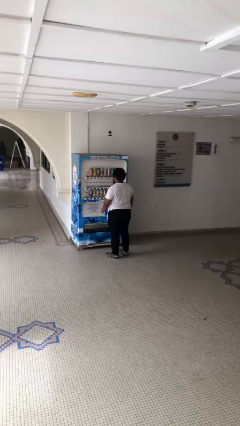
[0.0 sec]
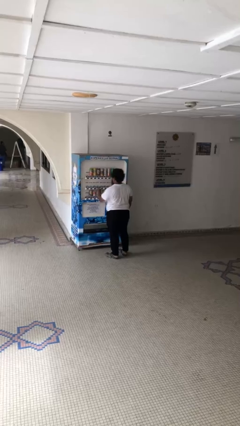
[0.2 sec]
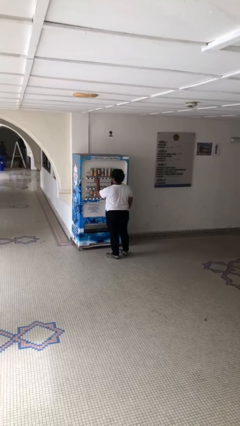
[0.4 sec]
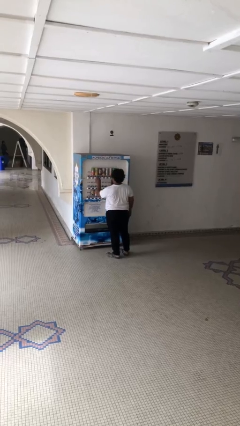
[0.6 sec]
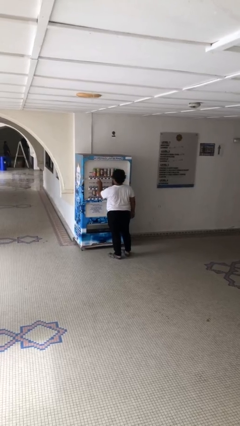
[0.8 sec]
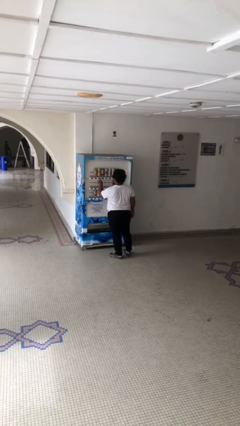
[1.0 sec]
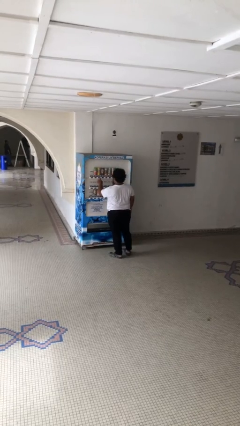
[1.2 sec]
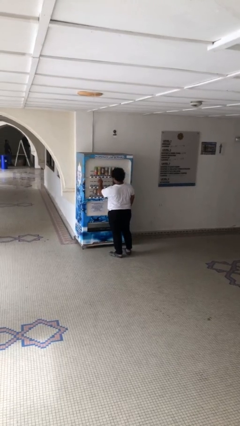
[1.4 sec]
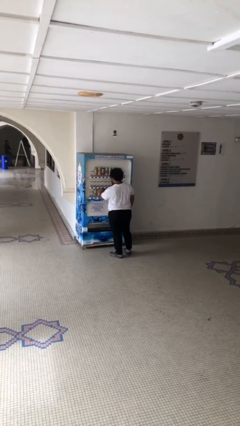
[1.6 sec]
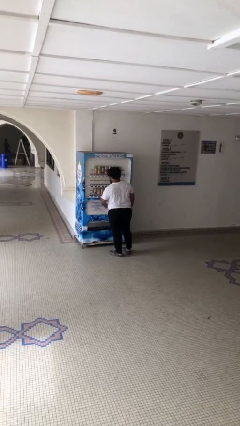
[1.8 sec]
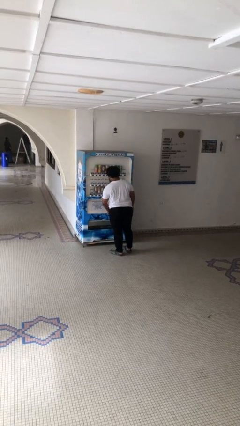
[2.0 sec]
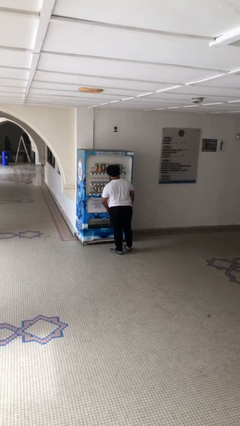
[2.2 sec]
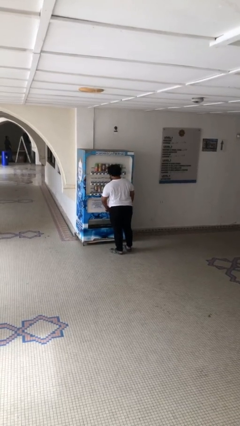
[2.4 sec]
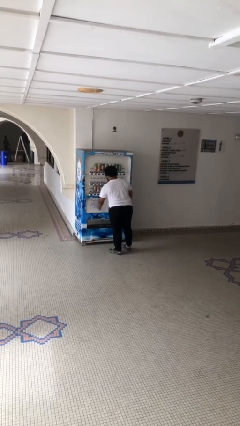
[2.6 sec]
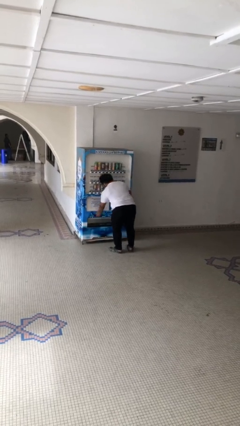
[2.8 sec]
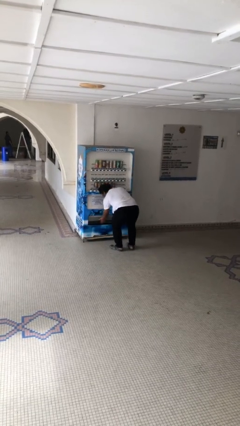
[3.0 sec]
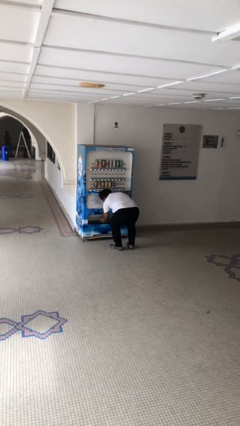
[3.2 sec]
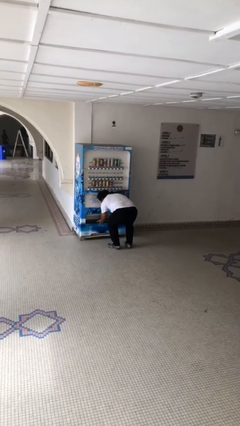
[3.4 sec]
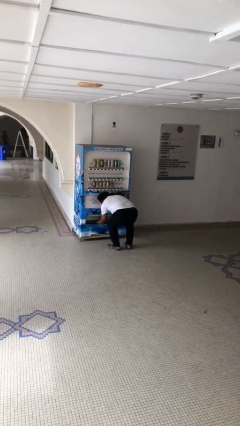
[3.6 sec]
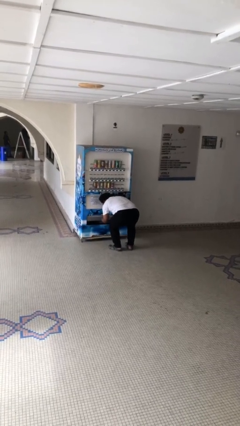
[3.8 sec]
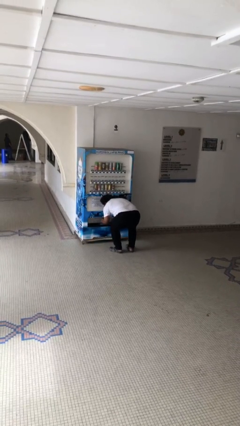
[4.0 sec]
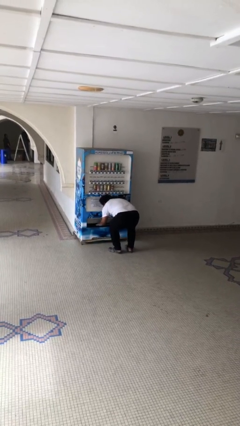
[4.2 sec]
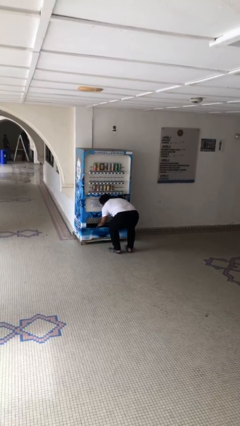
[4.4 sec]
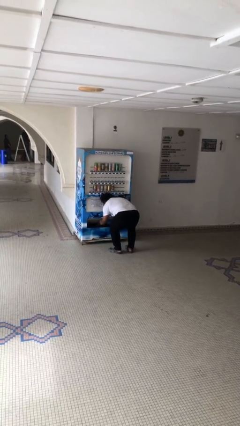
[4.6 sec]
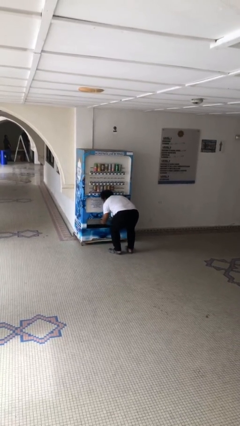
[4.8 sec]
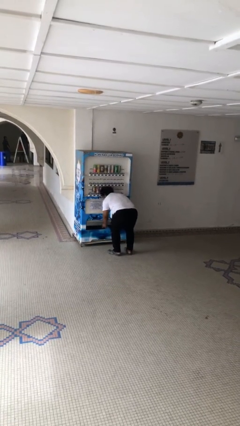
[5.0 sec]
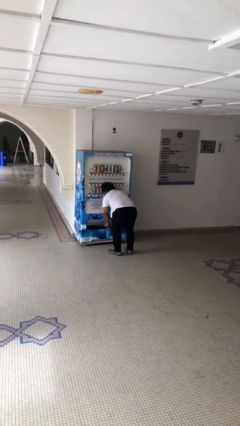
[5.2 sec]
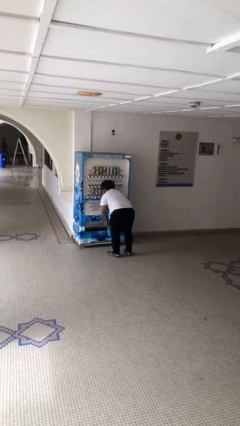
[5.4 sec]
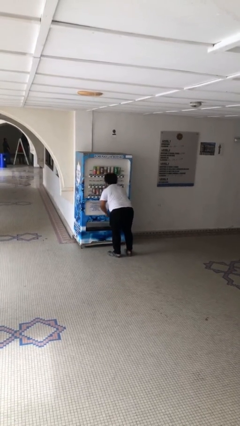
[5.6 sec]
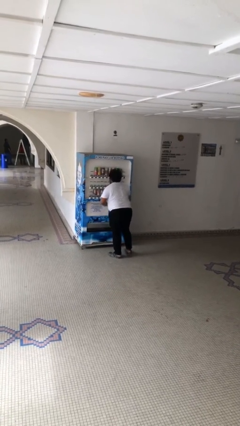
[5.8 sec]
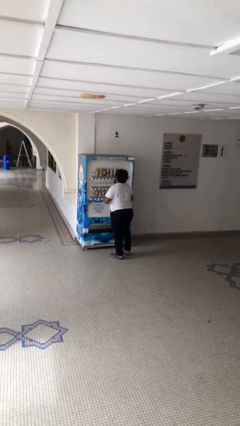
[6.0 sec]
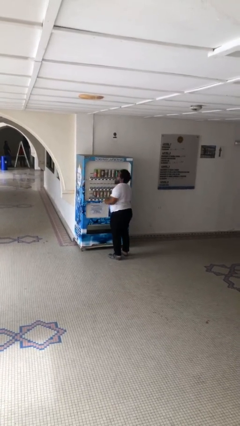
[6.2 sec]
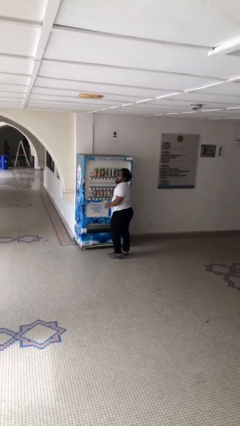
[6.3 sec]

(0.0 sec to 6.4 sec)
person purchases from machine

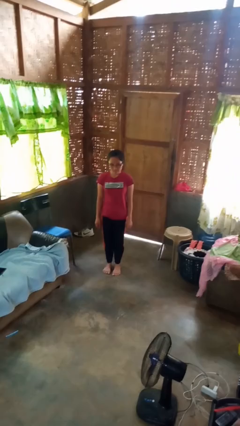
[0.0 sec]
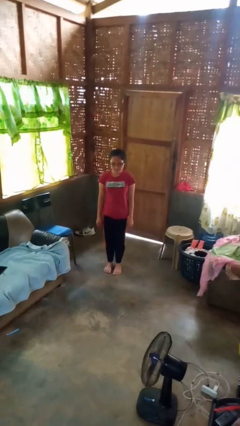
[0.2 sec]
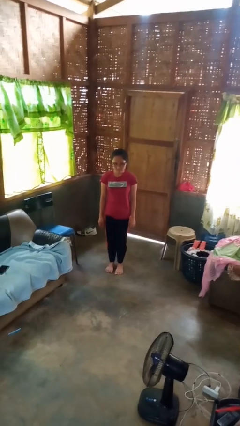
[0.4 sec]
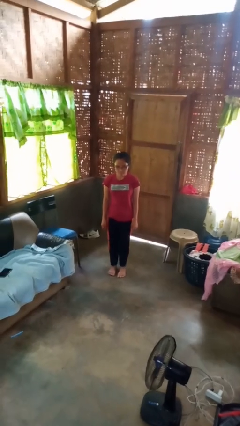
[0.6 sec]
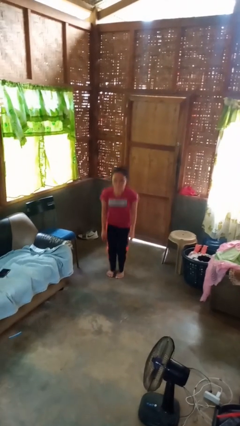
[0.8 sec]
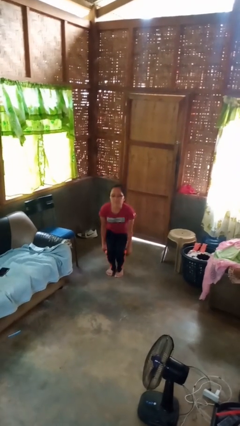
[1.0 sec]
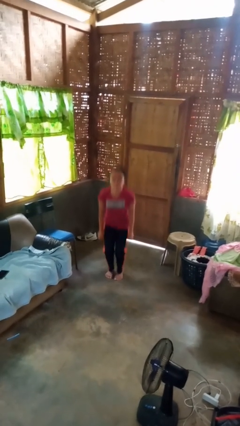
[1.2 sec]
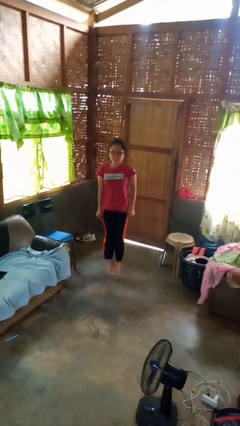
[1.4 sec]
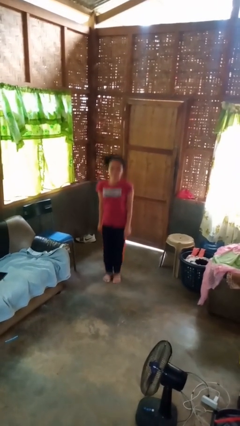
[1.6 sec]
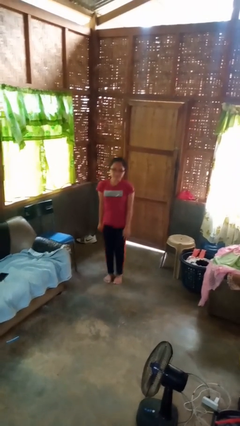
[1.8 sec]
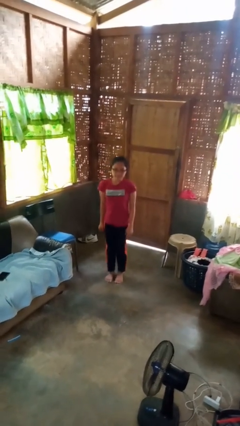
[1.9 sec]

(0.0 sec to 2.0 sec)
person jumps

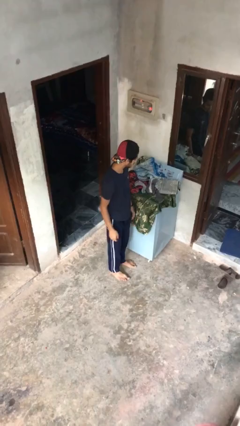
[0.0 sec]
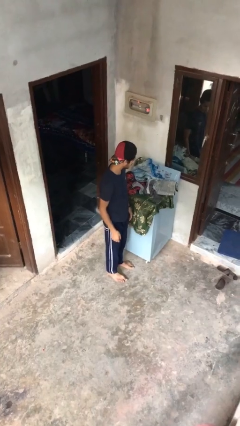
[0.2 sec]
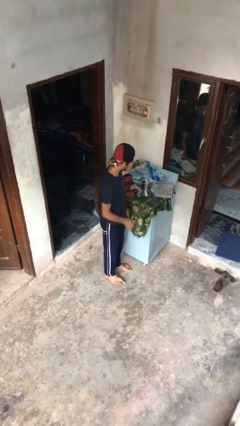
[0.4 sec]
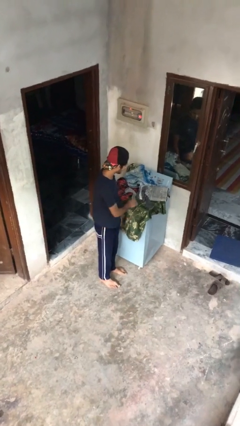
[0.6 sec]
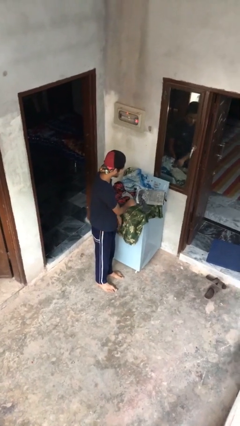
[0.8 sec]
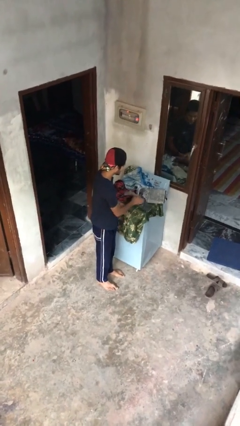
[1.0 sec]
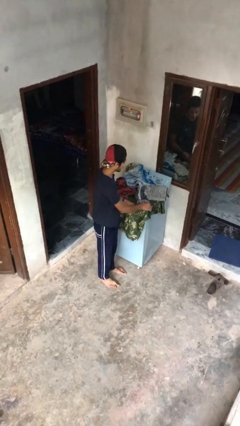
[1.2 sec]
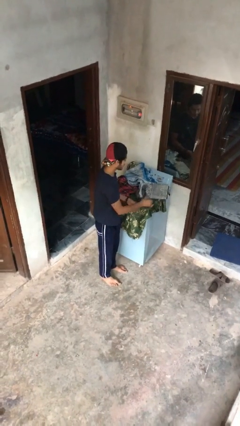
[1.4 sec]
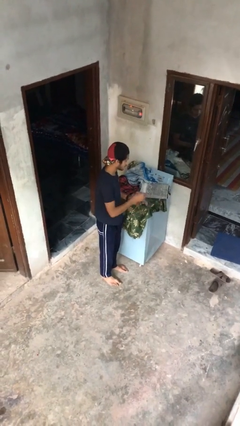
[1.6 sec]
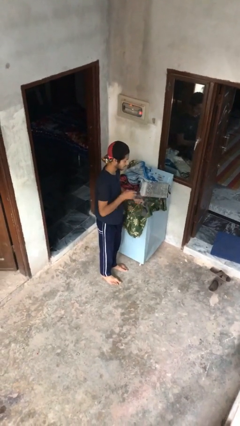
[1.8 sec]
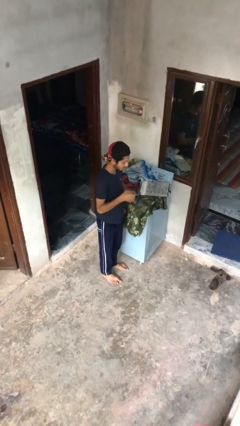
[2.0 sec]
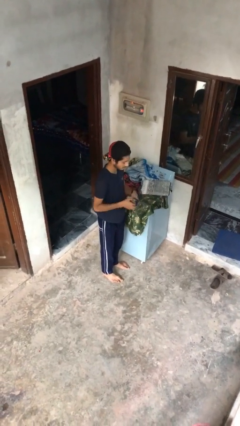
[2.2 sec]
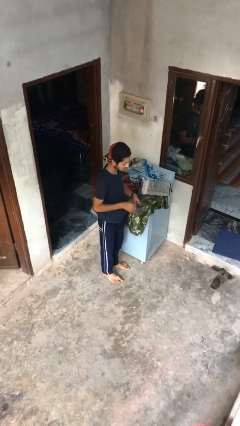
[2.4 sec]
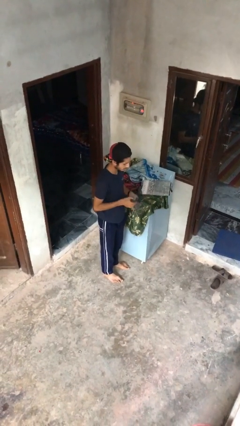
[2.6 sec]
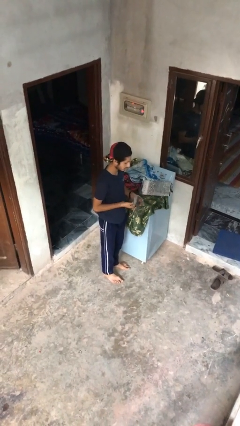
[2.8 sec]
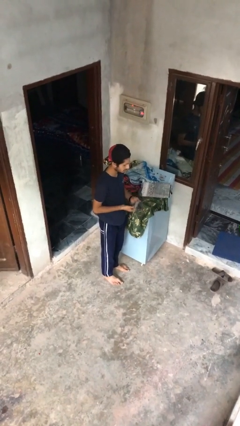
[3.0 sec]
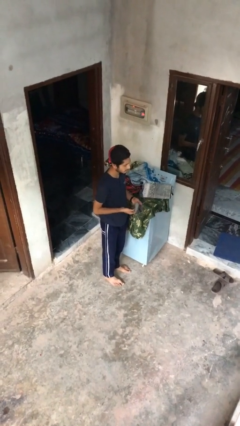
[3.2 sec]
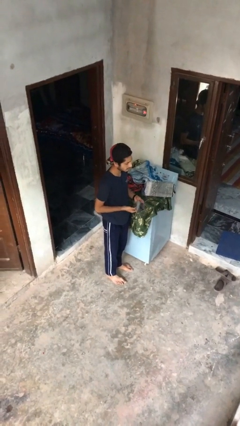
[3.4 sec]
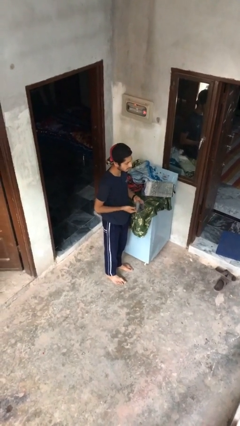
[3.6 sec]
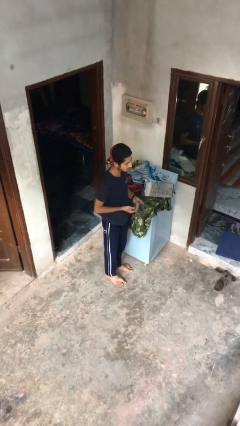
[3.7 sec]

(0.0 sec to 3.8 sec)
person folds socks

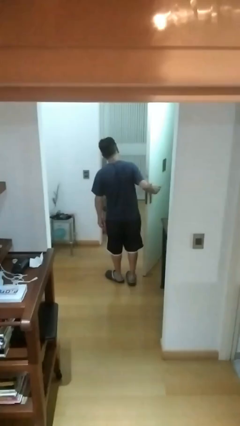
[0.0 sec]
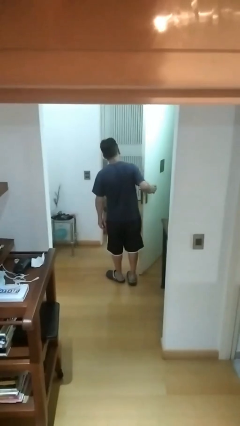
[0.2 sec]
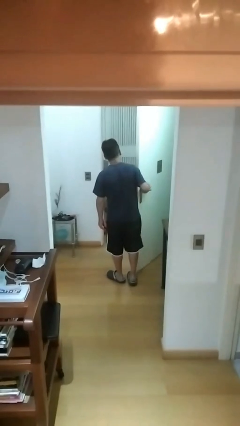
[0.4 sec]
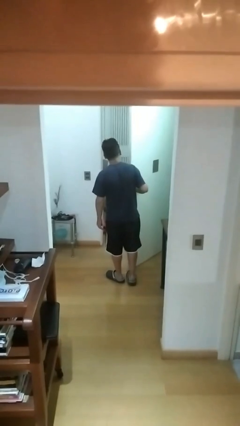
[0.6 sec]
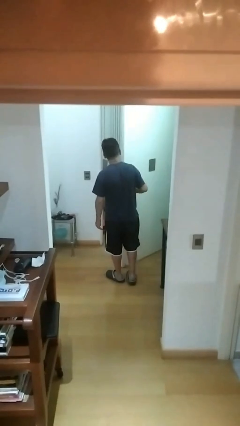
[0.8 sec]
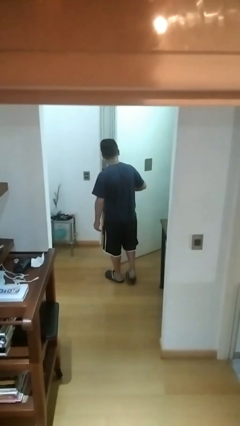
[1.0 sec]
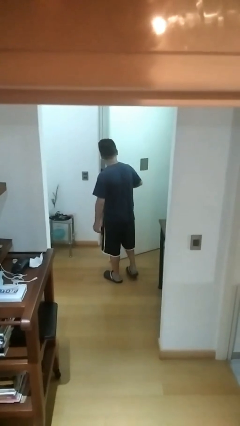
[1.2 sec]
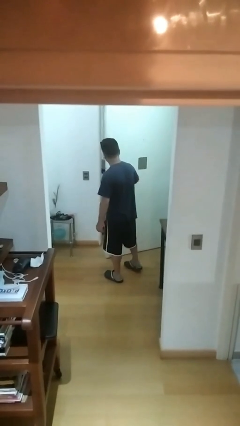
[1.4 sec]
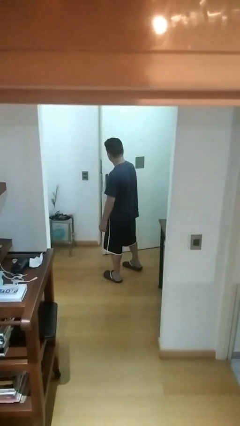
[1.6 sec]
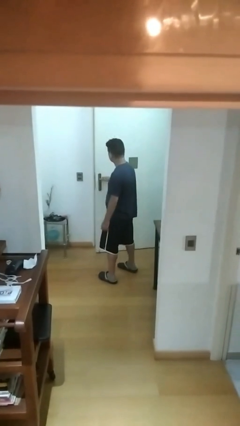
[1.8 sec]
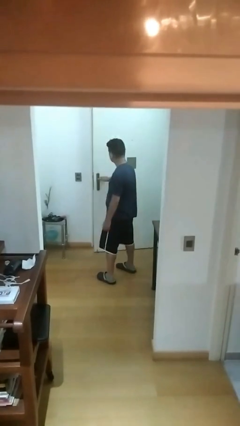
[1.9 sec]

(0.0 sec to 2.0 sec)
person closes facility door

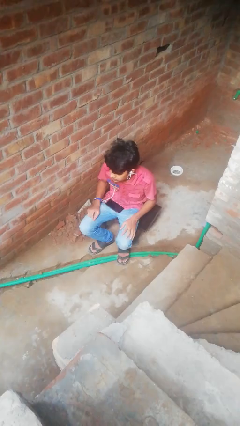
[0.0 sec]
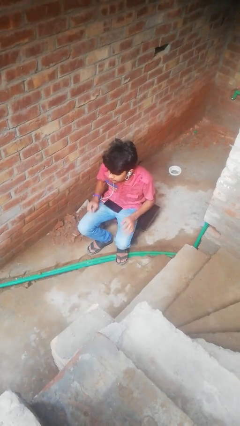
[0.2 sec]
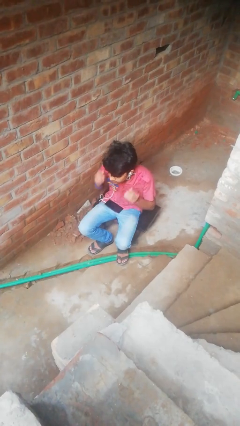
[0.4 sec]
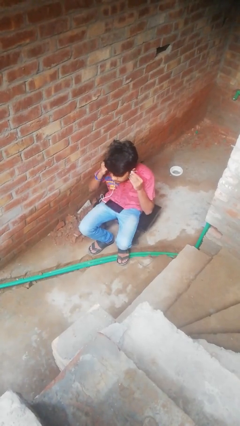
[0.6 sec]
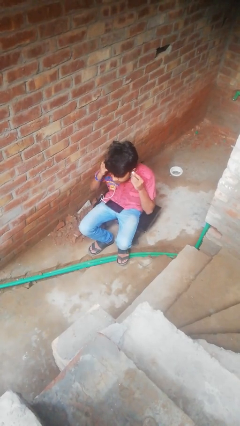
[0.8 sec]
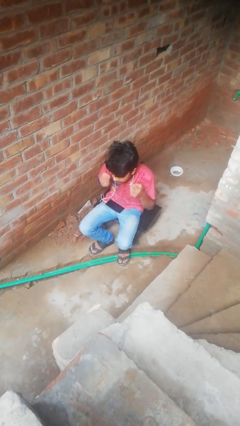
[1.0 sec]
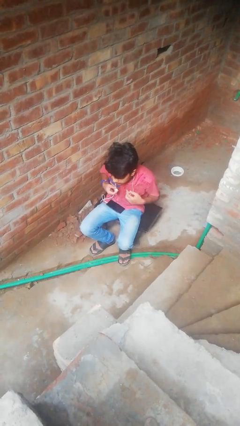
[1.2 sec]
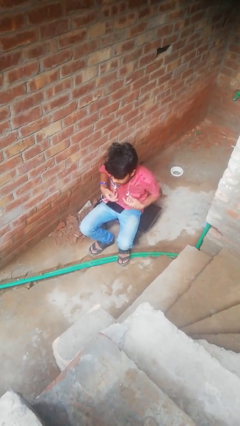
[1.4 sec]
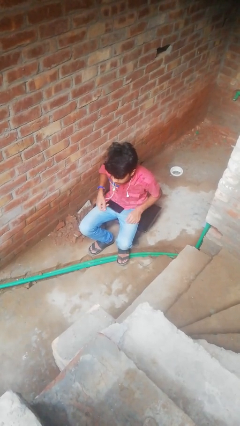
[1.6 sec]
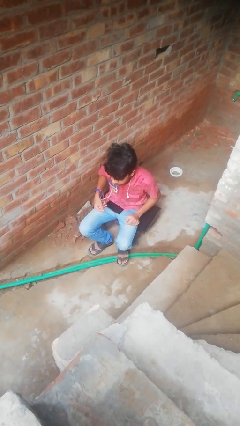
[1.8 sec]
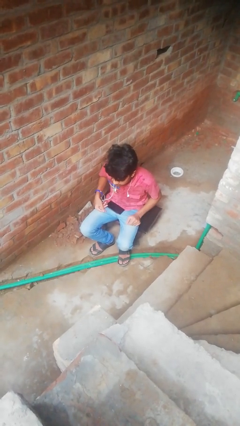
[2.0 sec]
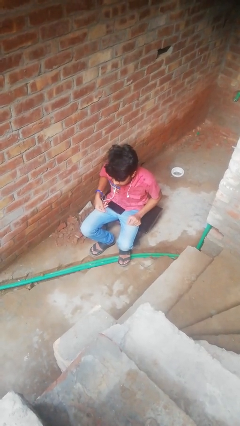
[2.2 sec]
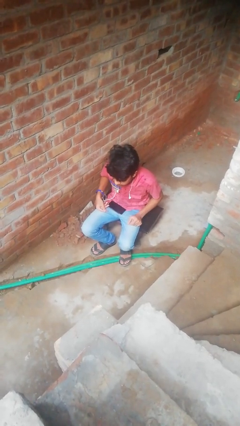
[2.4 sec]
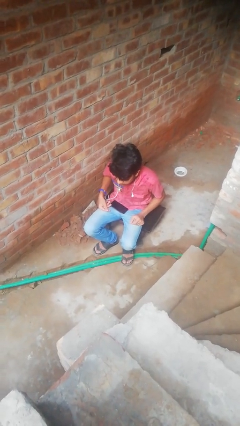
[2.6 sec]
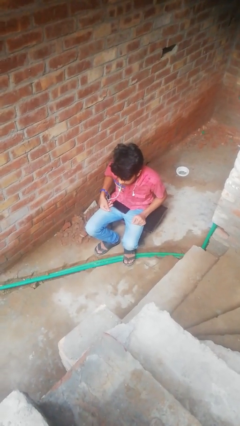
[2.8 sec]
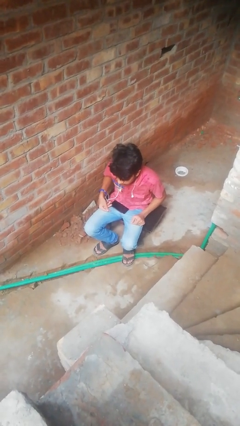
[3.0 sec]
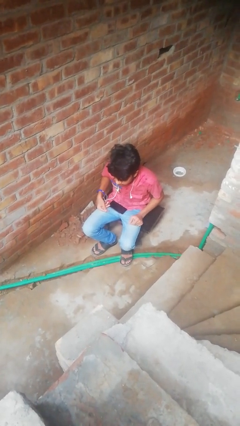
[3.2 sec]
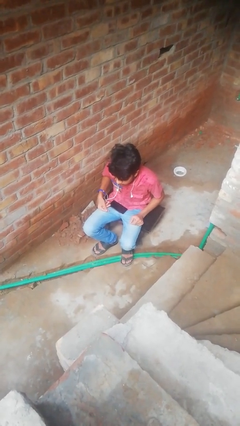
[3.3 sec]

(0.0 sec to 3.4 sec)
person takes off headphones
